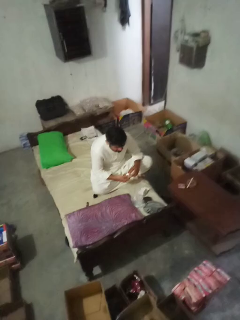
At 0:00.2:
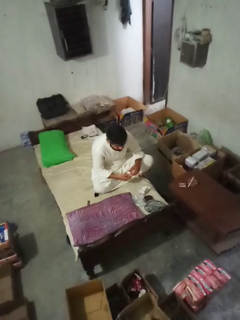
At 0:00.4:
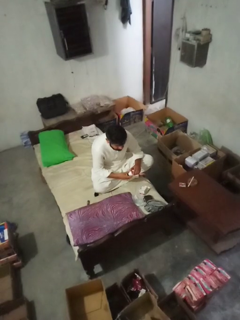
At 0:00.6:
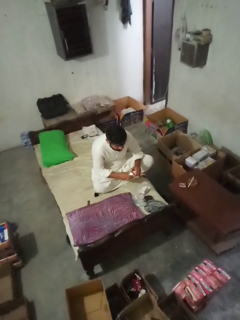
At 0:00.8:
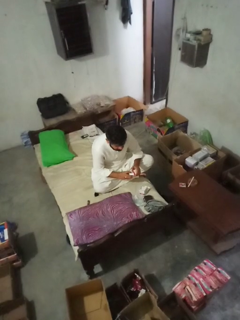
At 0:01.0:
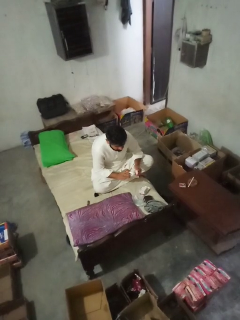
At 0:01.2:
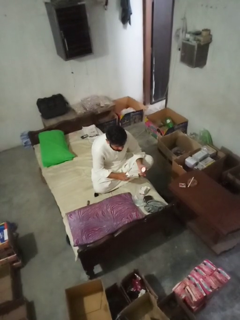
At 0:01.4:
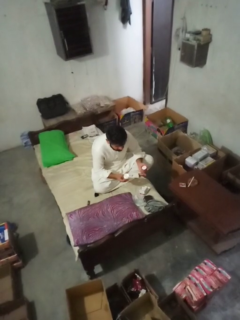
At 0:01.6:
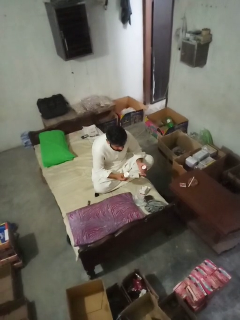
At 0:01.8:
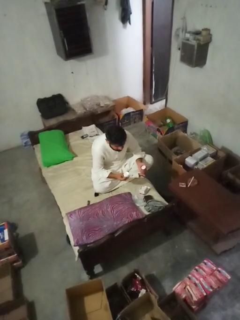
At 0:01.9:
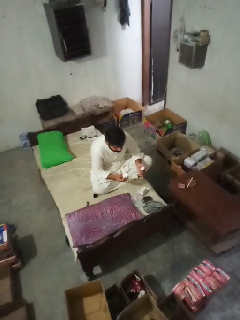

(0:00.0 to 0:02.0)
person opens jar

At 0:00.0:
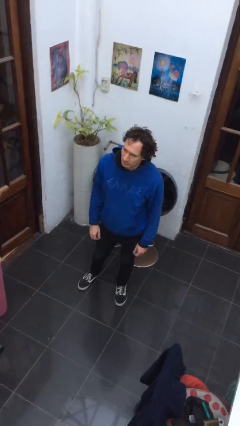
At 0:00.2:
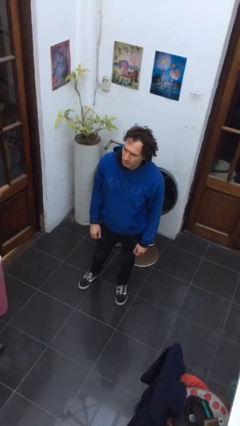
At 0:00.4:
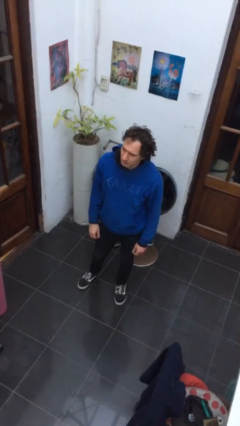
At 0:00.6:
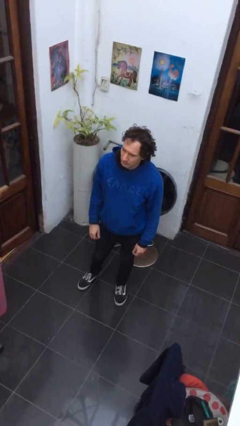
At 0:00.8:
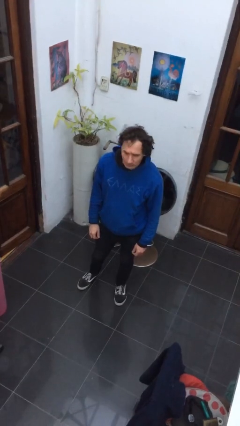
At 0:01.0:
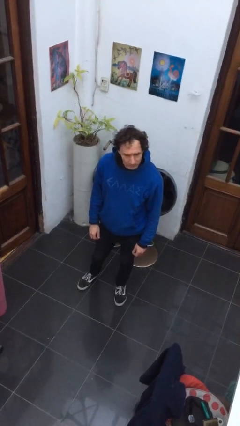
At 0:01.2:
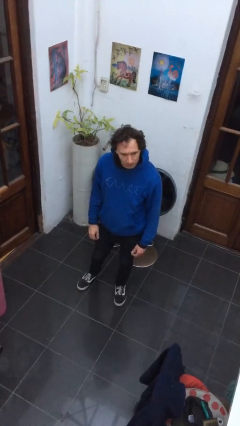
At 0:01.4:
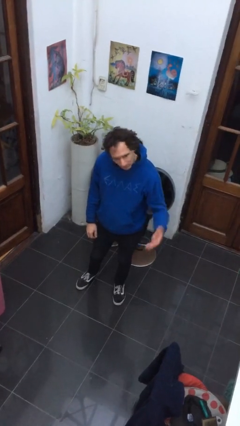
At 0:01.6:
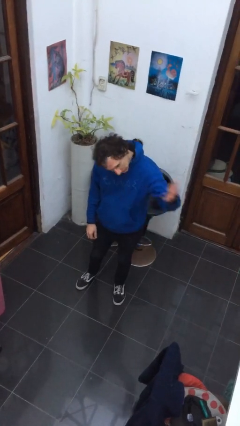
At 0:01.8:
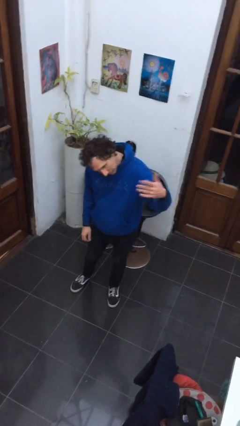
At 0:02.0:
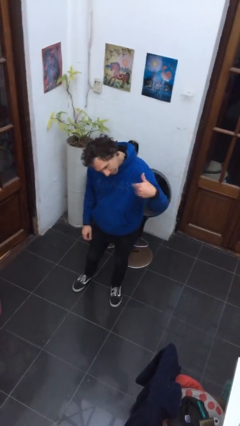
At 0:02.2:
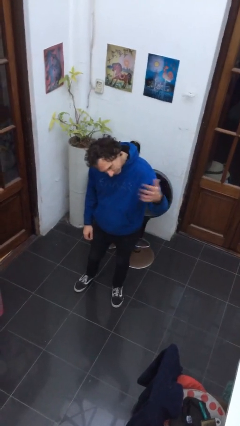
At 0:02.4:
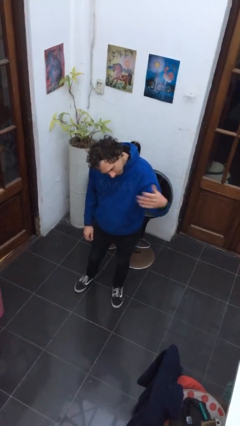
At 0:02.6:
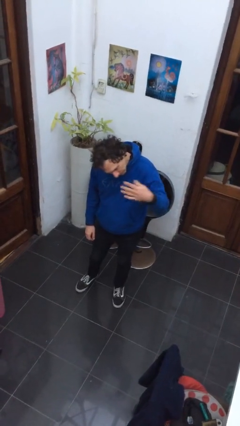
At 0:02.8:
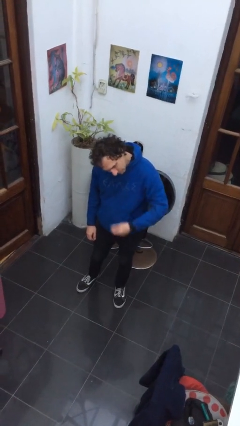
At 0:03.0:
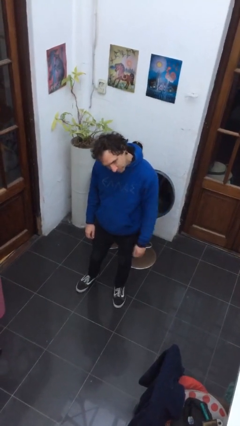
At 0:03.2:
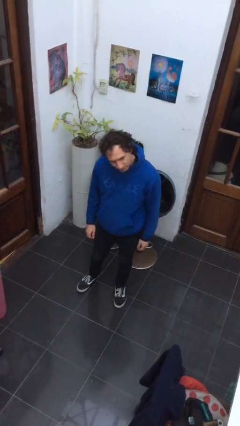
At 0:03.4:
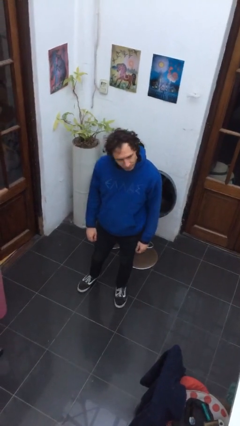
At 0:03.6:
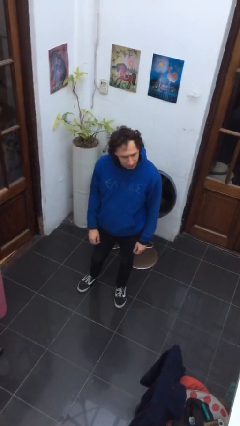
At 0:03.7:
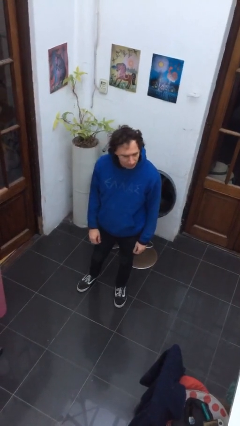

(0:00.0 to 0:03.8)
person gestures come here

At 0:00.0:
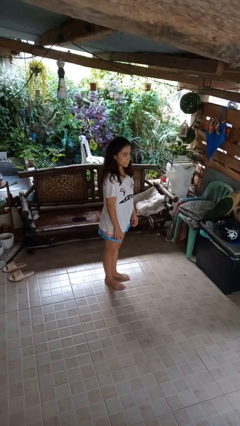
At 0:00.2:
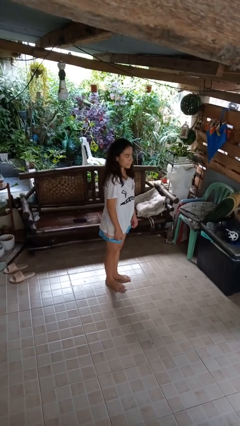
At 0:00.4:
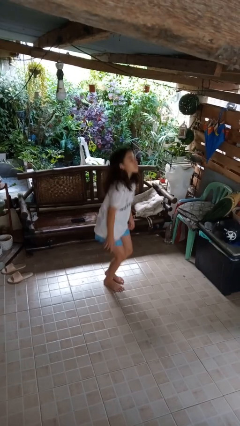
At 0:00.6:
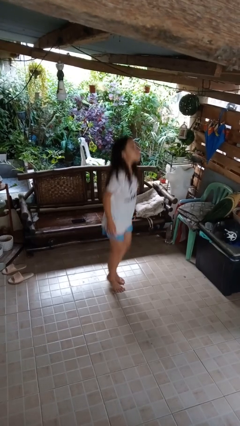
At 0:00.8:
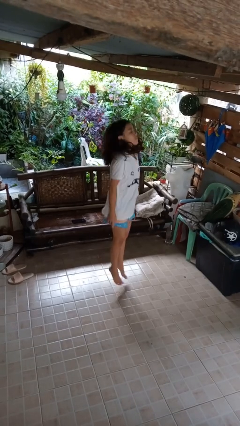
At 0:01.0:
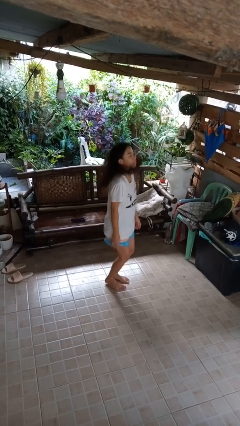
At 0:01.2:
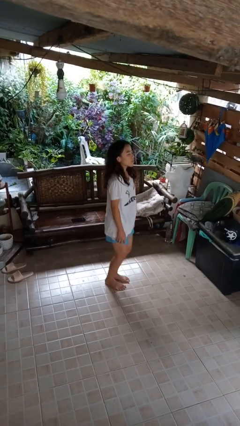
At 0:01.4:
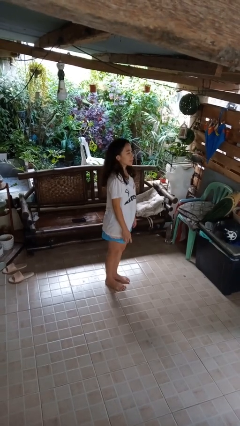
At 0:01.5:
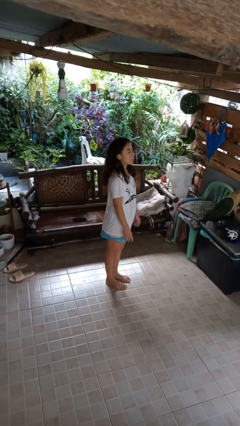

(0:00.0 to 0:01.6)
person jumps

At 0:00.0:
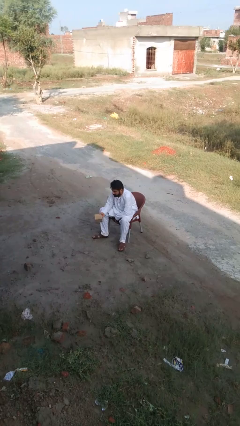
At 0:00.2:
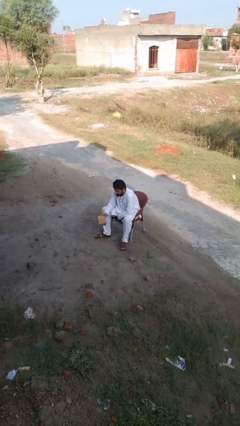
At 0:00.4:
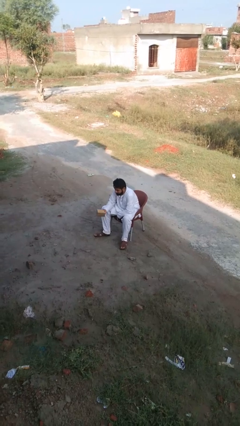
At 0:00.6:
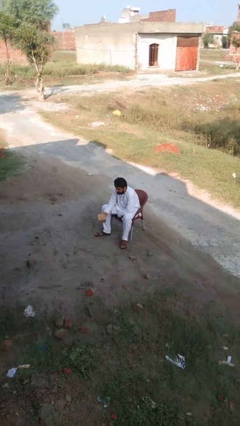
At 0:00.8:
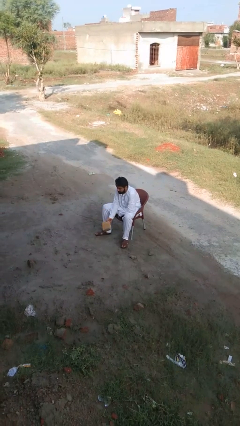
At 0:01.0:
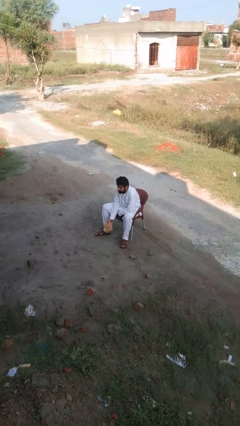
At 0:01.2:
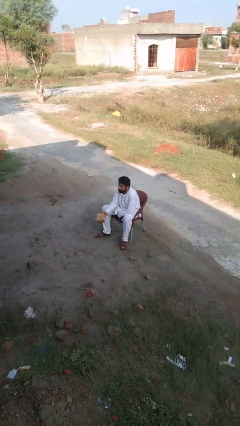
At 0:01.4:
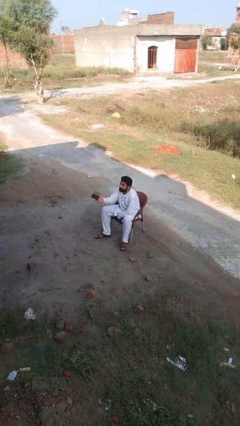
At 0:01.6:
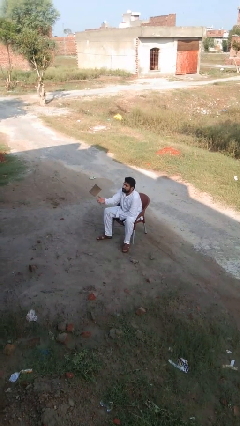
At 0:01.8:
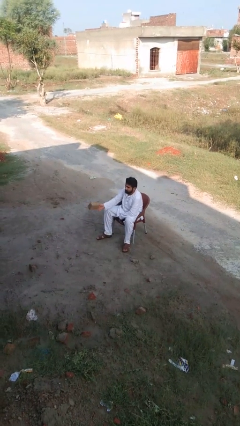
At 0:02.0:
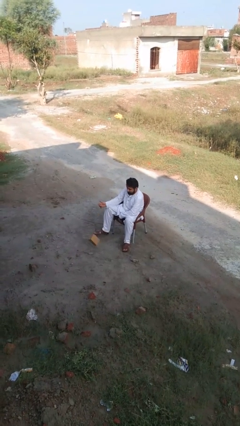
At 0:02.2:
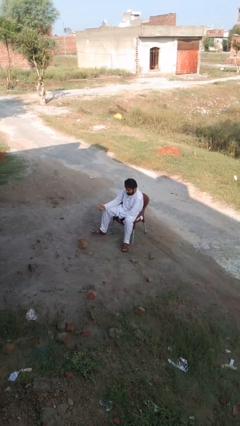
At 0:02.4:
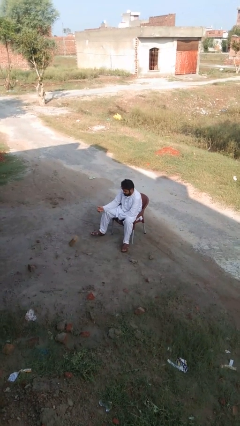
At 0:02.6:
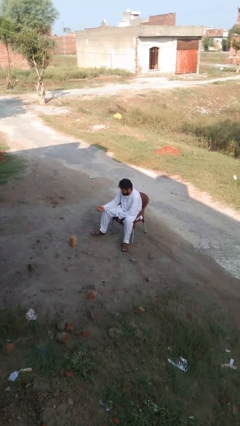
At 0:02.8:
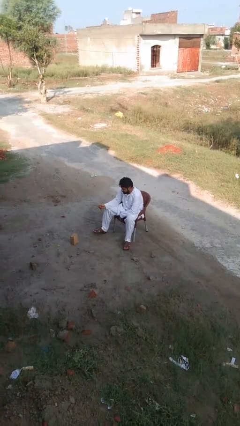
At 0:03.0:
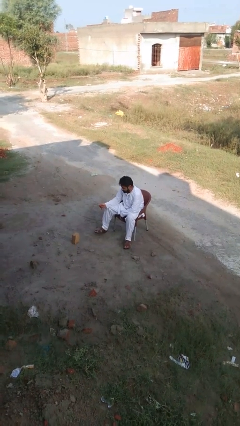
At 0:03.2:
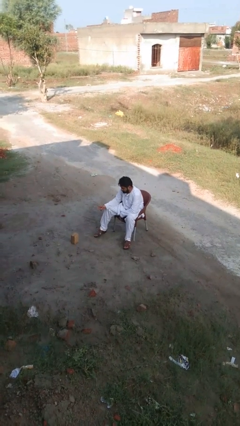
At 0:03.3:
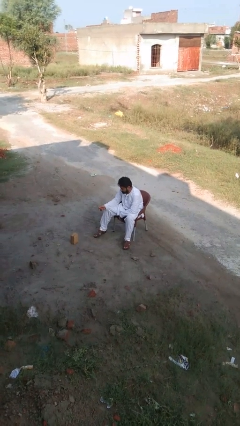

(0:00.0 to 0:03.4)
person throws object into air

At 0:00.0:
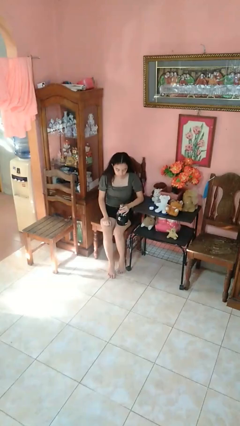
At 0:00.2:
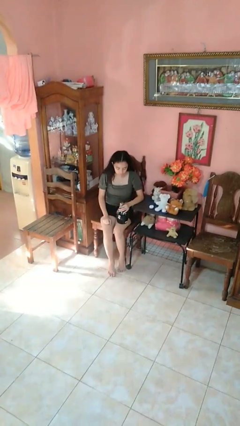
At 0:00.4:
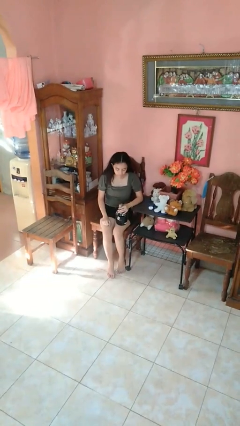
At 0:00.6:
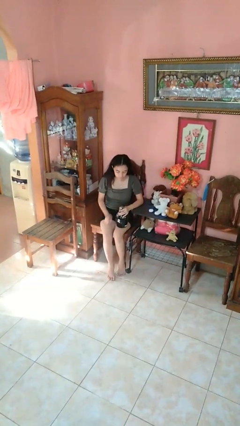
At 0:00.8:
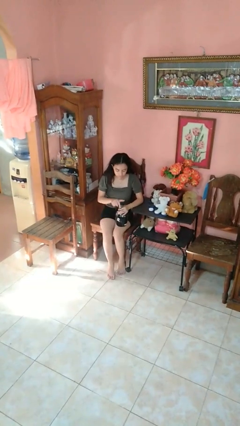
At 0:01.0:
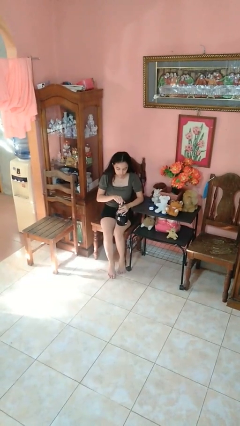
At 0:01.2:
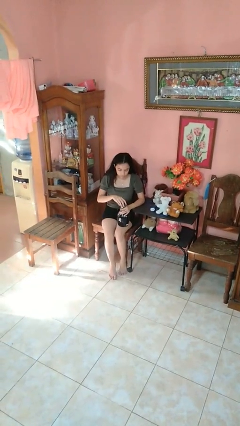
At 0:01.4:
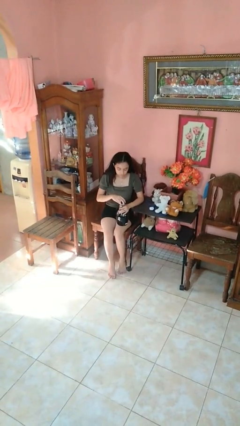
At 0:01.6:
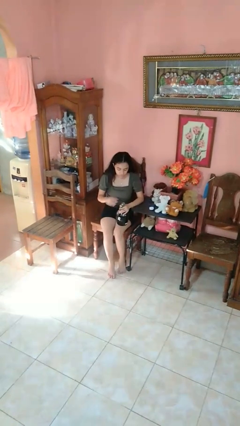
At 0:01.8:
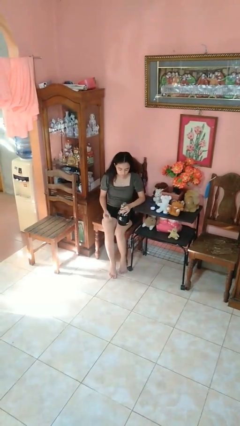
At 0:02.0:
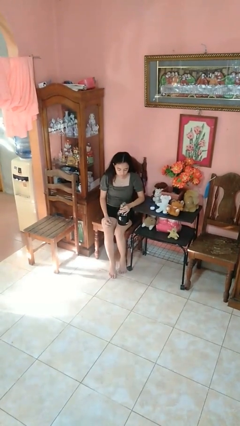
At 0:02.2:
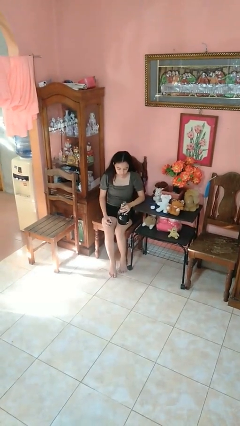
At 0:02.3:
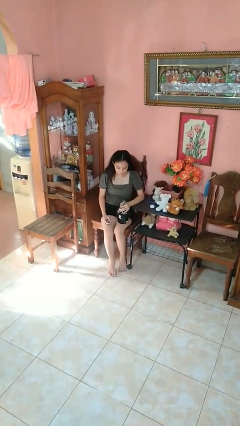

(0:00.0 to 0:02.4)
person unscrews lid from bottle

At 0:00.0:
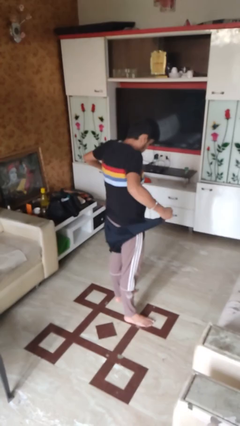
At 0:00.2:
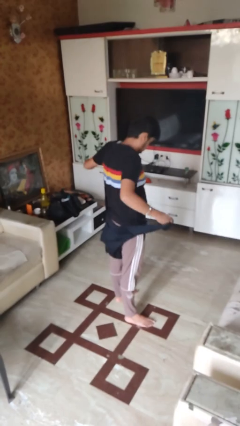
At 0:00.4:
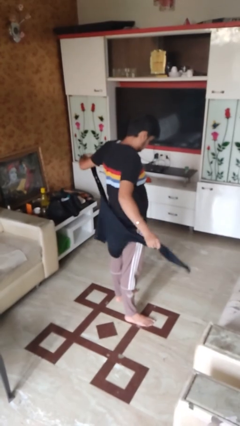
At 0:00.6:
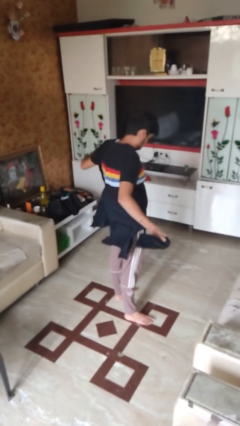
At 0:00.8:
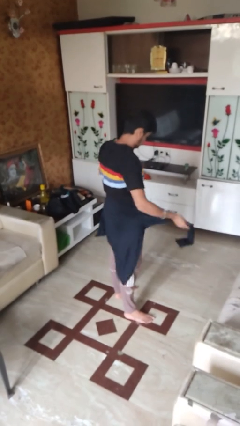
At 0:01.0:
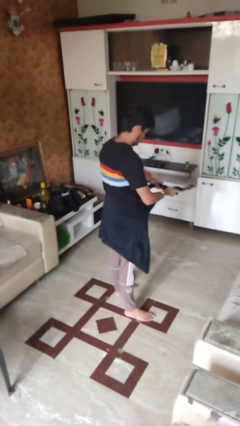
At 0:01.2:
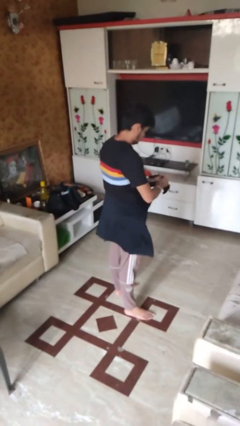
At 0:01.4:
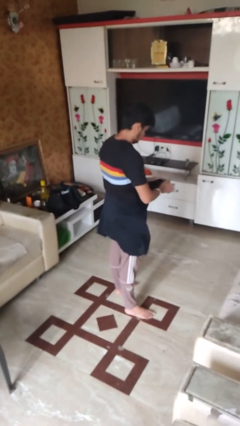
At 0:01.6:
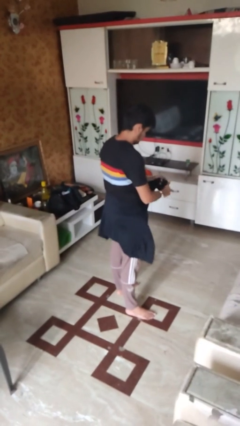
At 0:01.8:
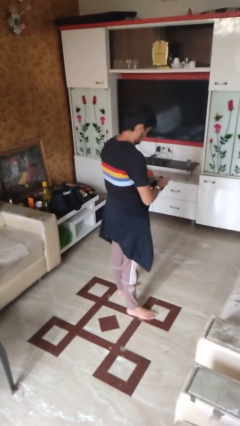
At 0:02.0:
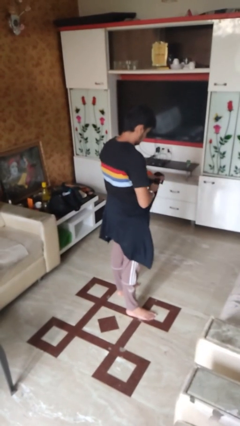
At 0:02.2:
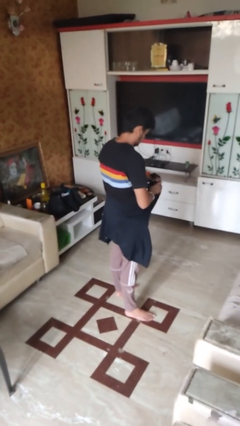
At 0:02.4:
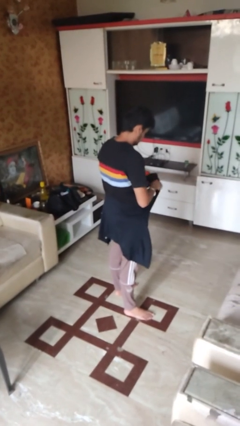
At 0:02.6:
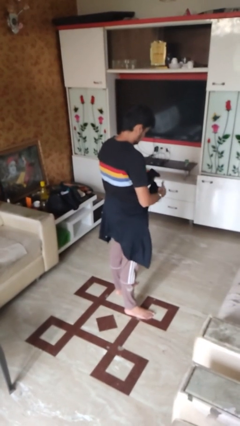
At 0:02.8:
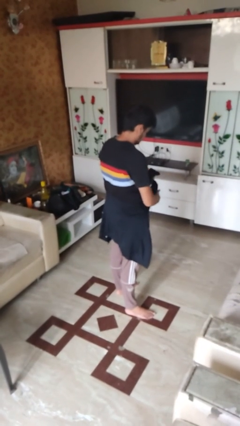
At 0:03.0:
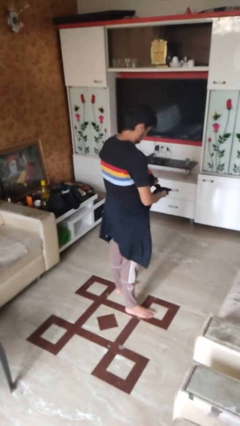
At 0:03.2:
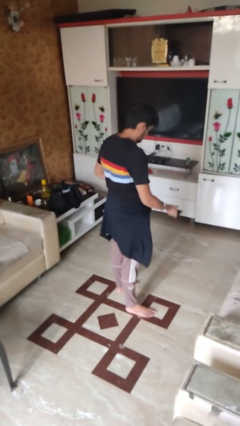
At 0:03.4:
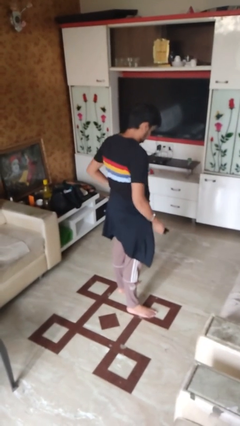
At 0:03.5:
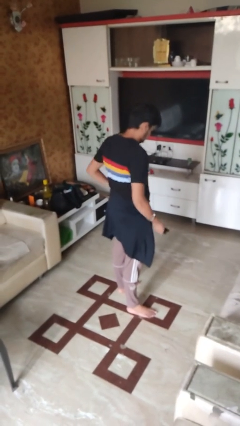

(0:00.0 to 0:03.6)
person ties jacket around waist

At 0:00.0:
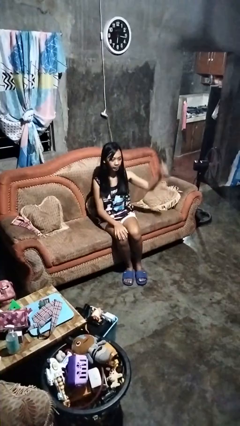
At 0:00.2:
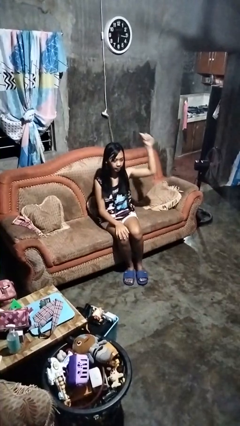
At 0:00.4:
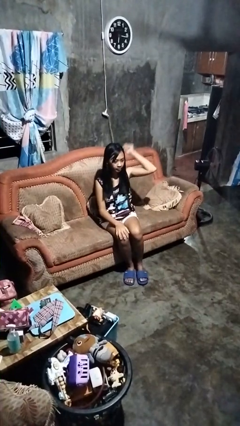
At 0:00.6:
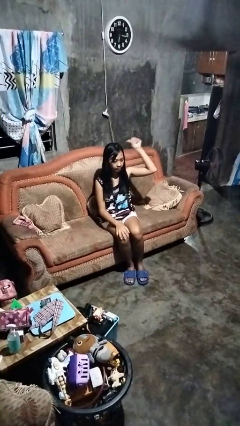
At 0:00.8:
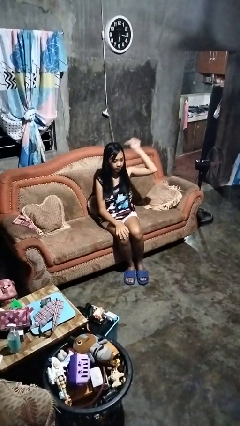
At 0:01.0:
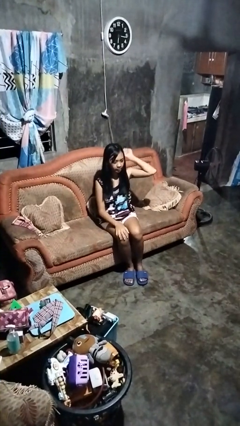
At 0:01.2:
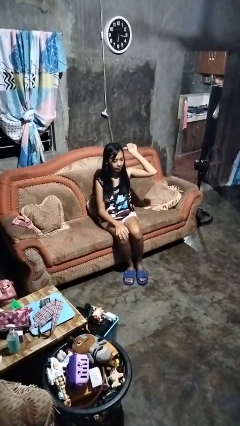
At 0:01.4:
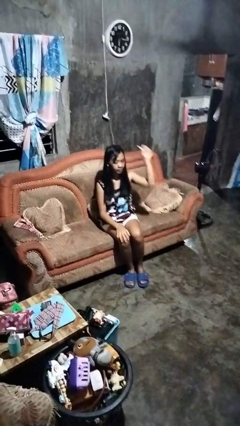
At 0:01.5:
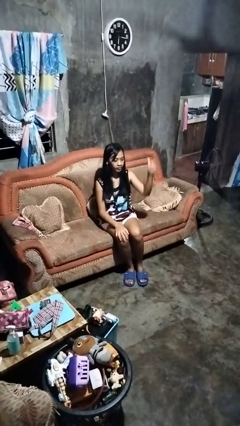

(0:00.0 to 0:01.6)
person gestures behind me
